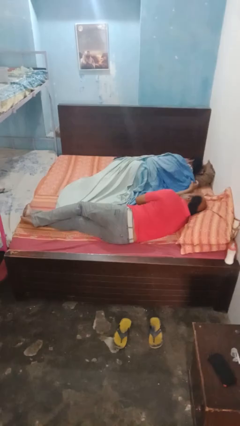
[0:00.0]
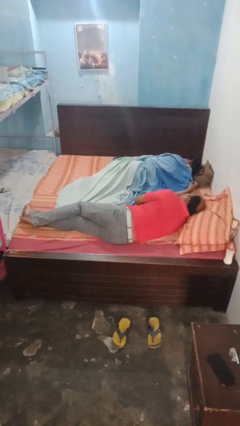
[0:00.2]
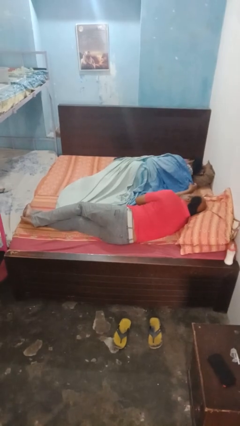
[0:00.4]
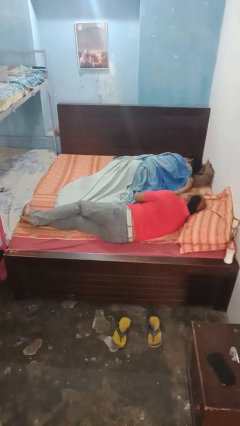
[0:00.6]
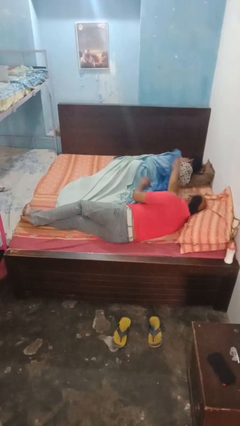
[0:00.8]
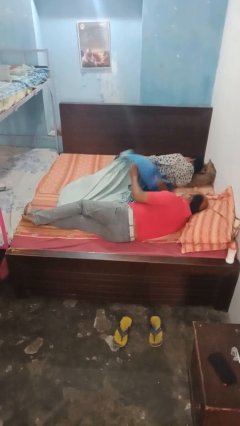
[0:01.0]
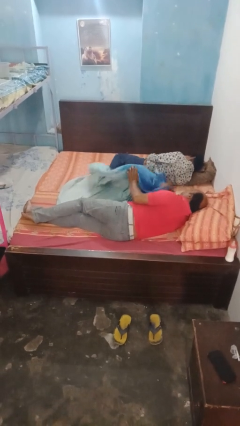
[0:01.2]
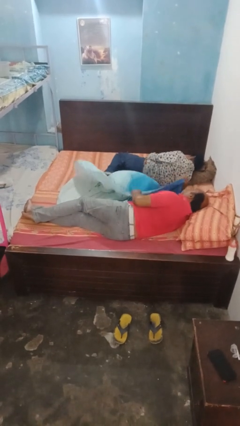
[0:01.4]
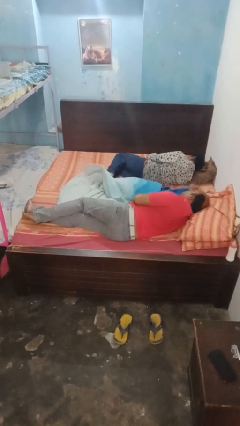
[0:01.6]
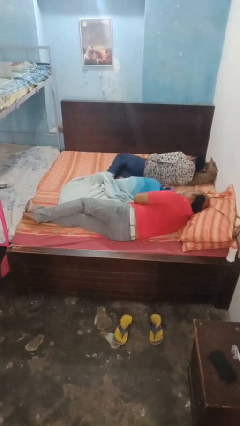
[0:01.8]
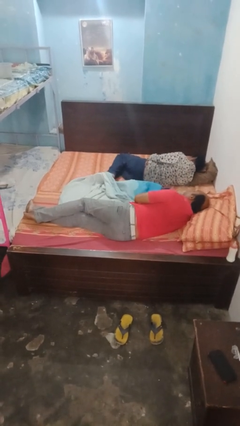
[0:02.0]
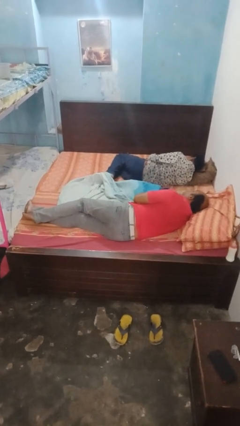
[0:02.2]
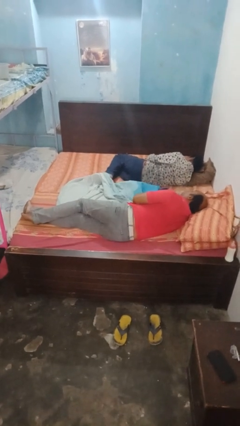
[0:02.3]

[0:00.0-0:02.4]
person uncovers friend with blanket

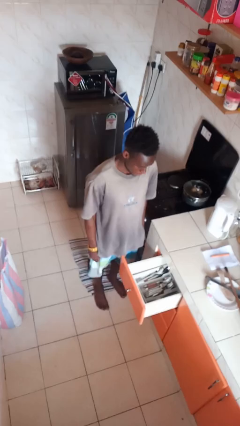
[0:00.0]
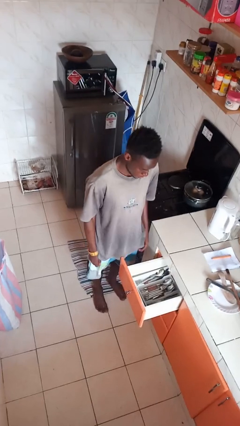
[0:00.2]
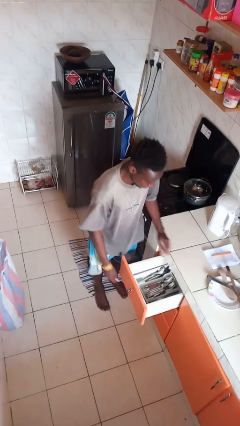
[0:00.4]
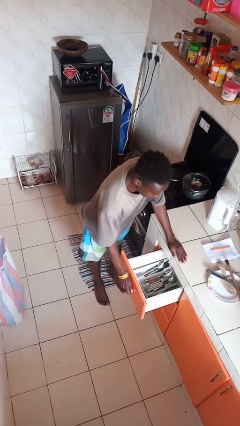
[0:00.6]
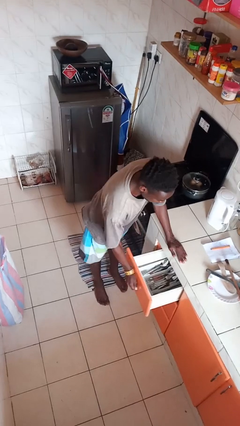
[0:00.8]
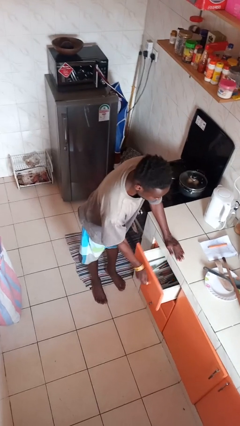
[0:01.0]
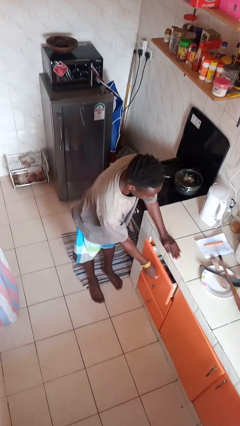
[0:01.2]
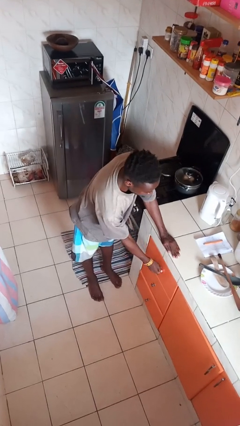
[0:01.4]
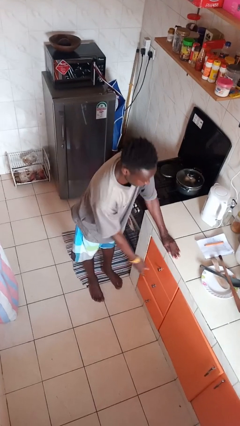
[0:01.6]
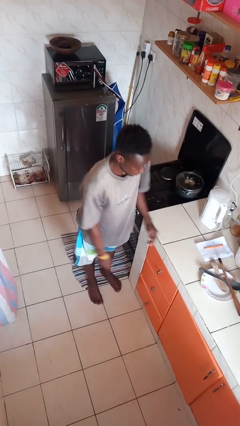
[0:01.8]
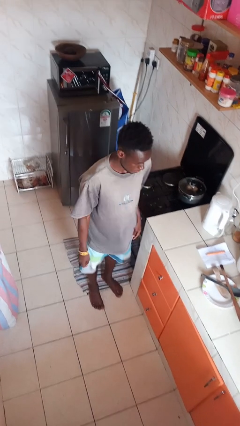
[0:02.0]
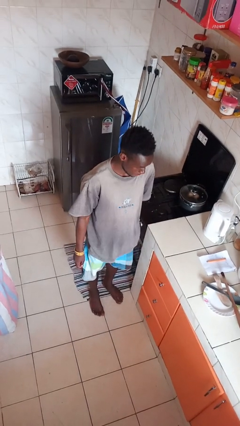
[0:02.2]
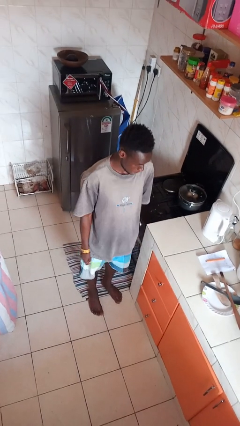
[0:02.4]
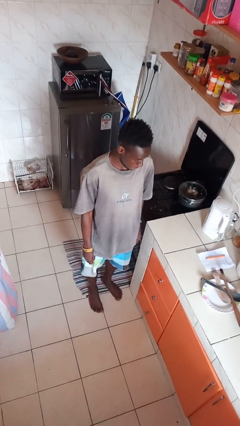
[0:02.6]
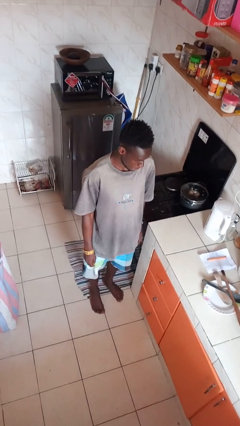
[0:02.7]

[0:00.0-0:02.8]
person closes kitchen drawer

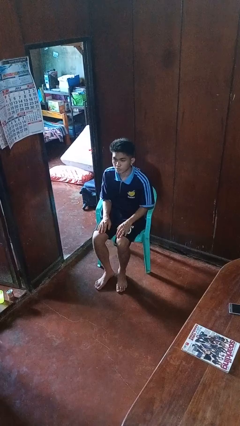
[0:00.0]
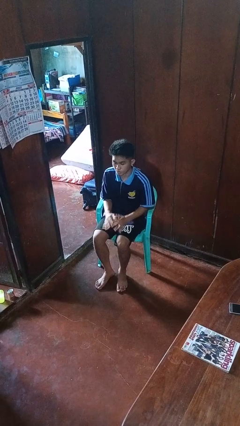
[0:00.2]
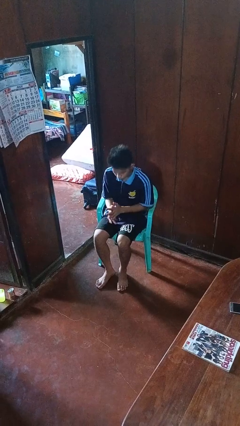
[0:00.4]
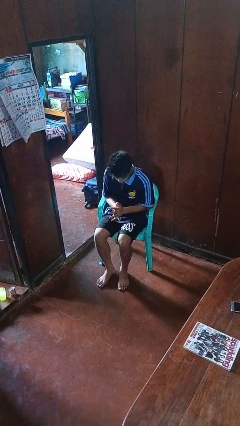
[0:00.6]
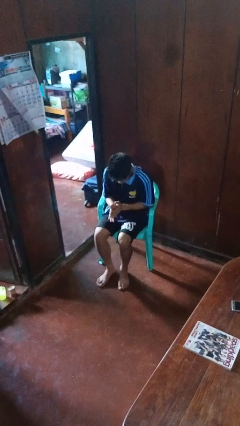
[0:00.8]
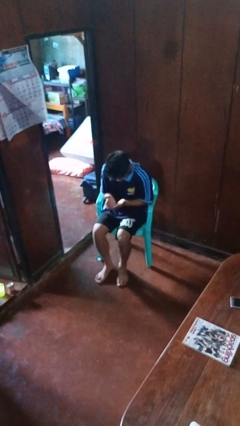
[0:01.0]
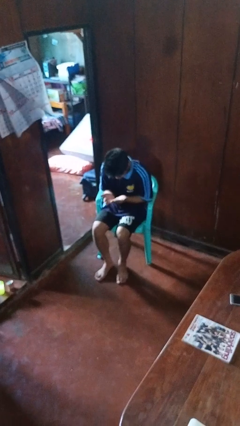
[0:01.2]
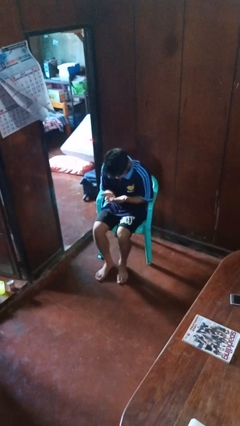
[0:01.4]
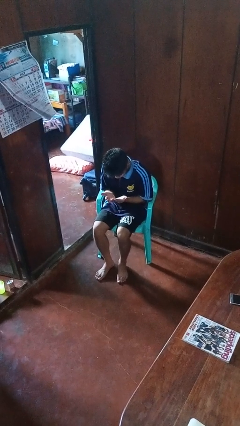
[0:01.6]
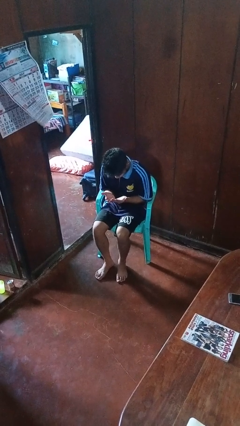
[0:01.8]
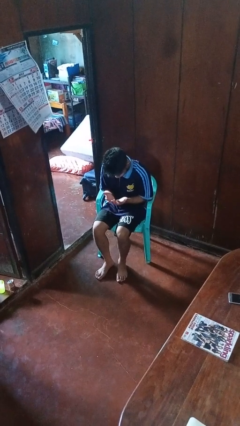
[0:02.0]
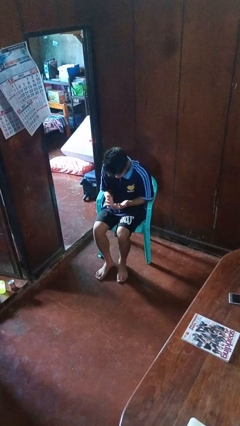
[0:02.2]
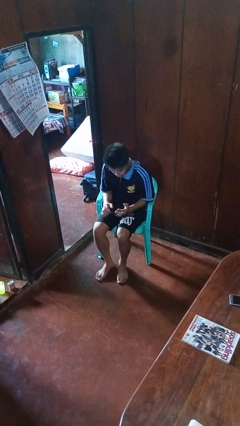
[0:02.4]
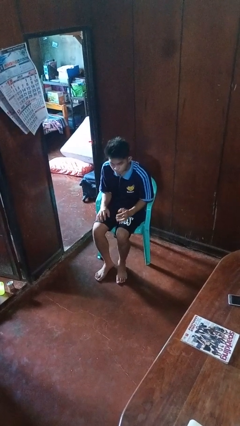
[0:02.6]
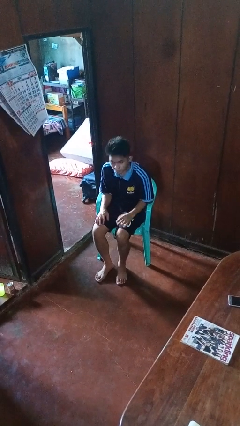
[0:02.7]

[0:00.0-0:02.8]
person looks at hands in lap

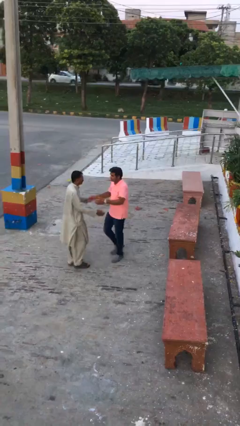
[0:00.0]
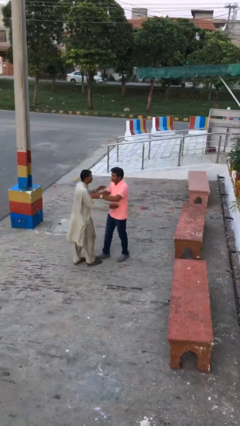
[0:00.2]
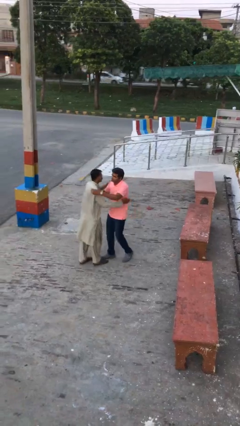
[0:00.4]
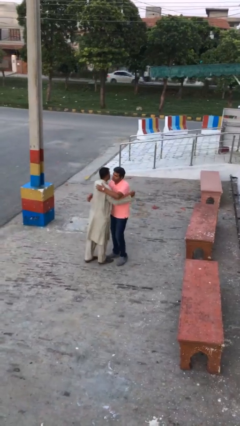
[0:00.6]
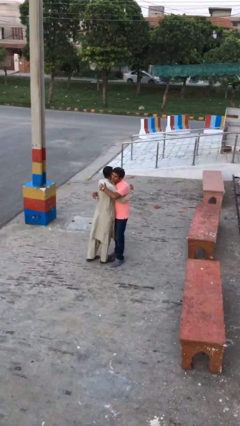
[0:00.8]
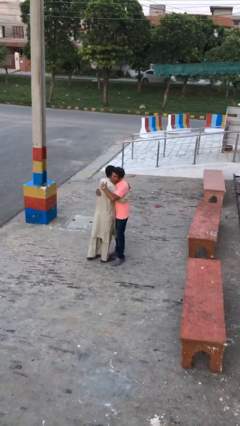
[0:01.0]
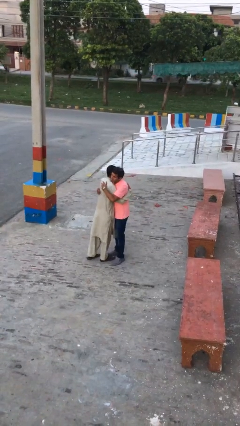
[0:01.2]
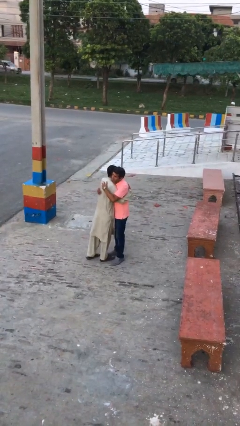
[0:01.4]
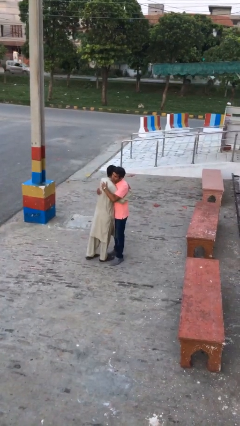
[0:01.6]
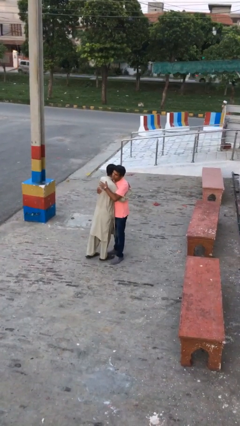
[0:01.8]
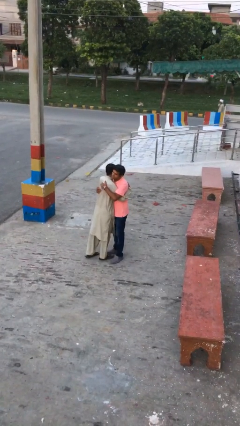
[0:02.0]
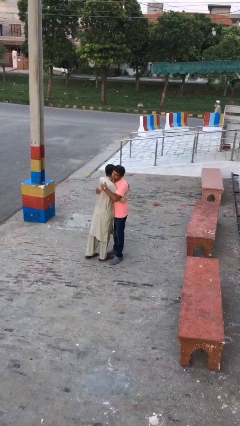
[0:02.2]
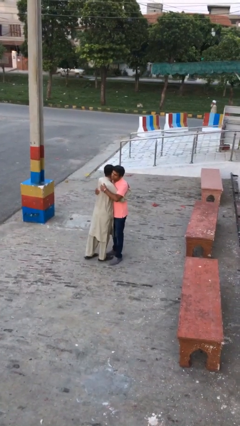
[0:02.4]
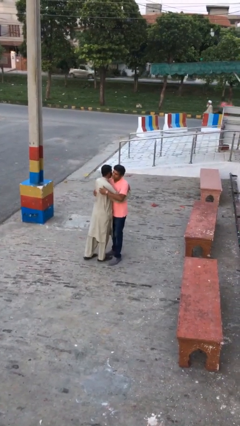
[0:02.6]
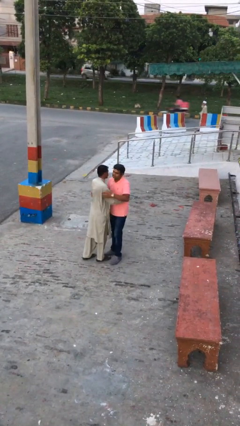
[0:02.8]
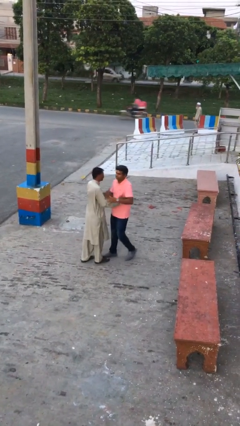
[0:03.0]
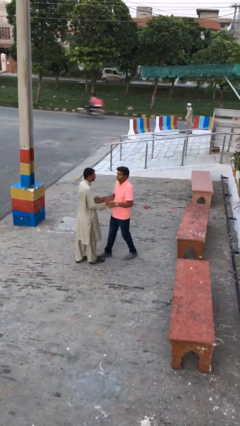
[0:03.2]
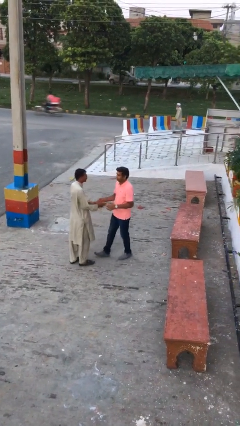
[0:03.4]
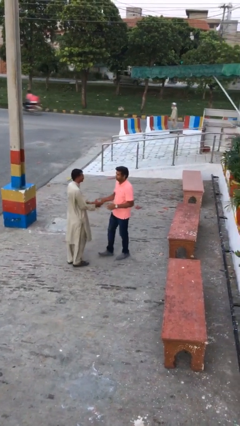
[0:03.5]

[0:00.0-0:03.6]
person embraces person

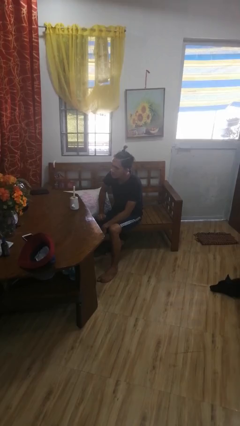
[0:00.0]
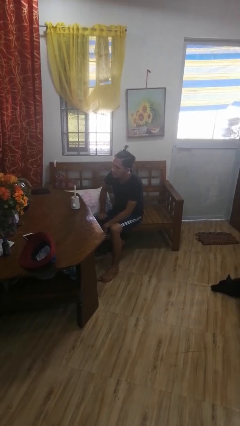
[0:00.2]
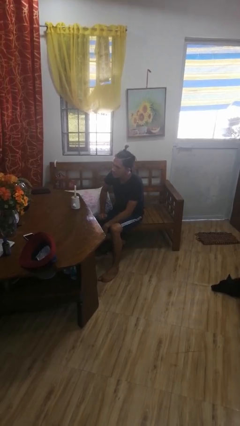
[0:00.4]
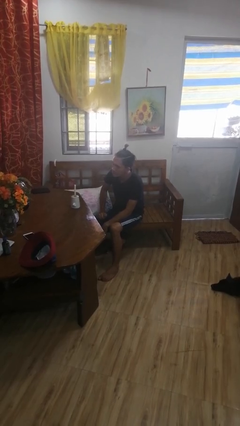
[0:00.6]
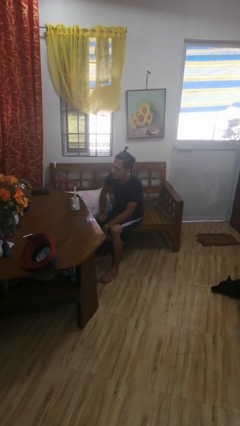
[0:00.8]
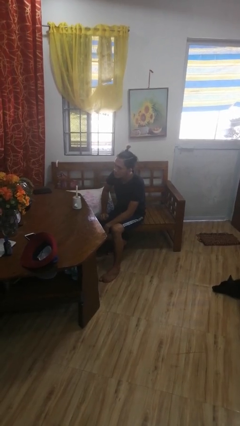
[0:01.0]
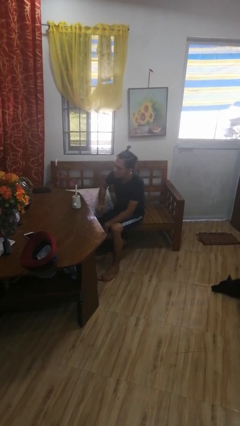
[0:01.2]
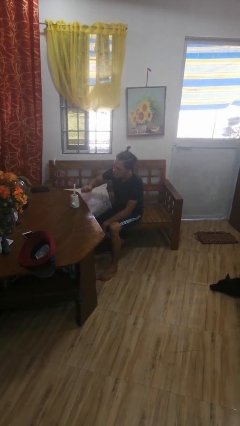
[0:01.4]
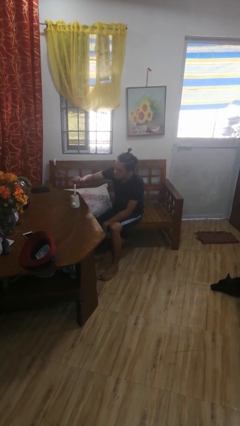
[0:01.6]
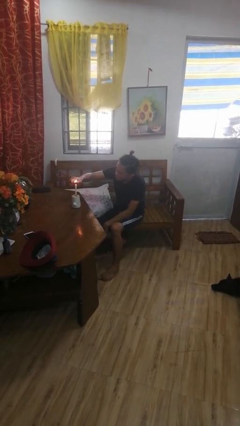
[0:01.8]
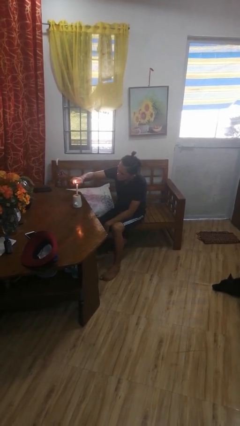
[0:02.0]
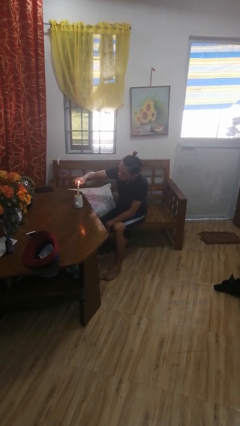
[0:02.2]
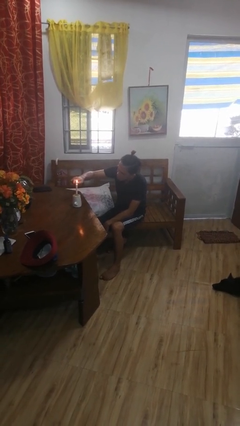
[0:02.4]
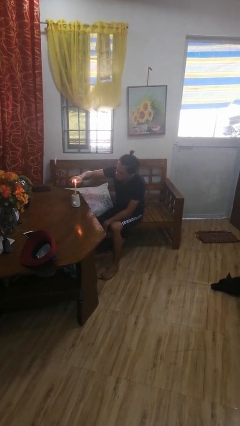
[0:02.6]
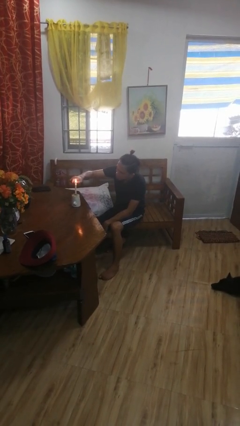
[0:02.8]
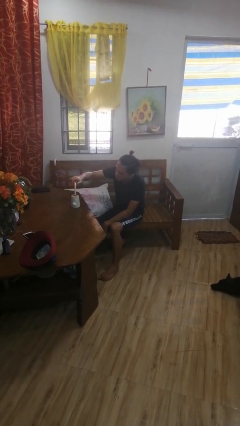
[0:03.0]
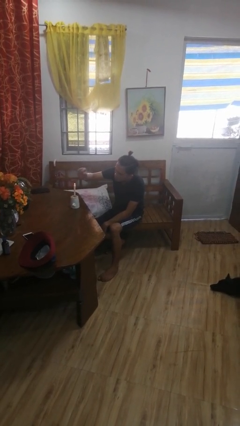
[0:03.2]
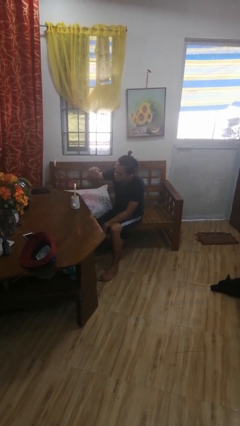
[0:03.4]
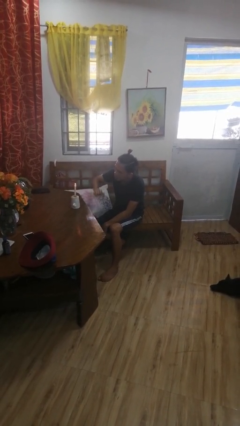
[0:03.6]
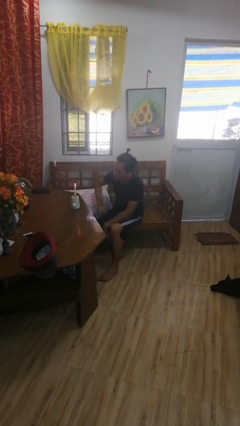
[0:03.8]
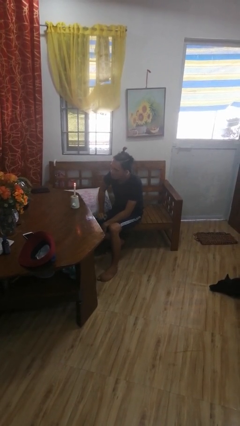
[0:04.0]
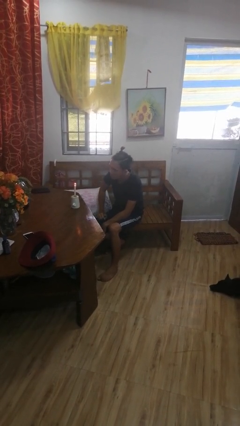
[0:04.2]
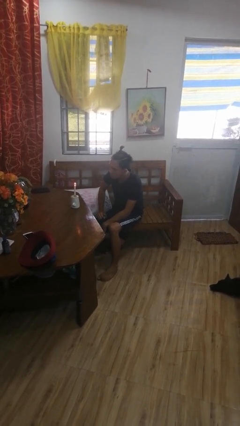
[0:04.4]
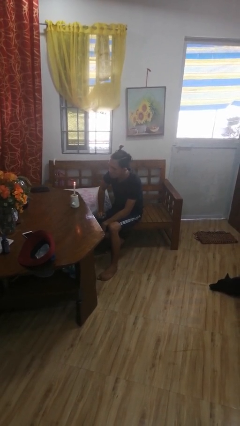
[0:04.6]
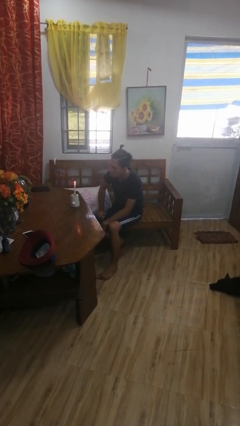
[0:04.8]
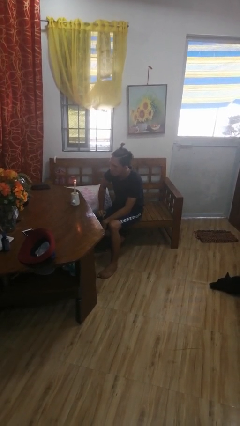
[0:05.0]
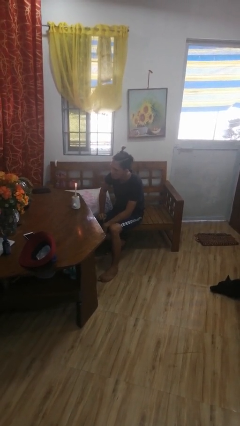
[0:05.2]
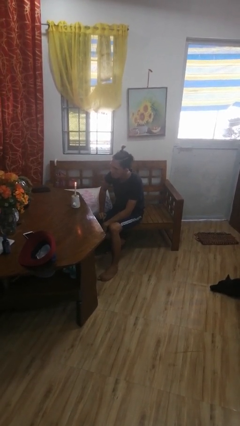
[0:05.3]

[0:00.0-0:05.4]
person lights candle

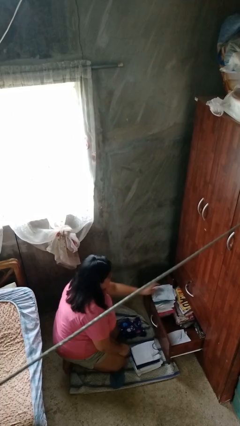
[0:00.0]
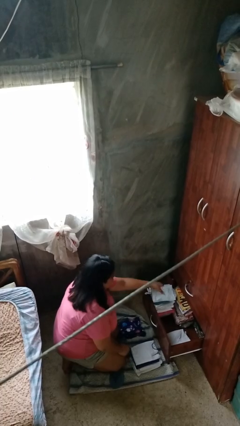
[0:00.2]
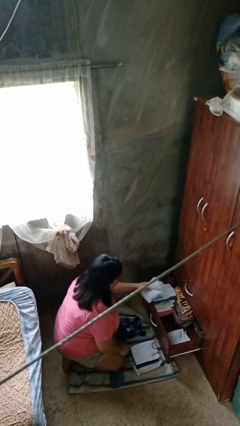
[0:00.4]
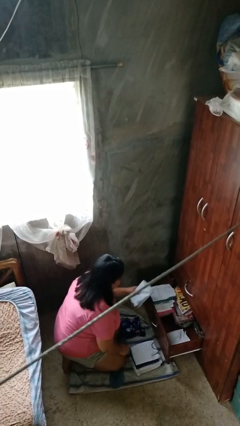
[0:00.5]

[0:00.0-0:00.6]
person takes clothes from dresser
